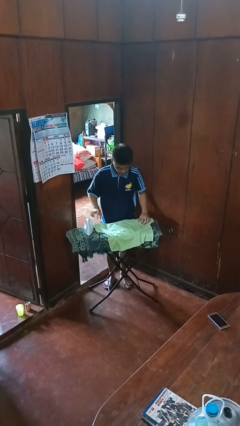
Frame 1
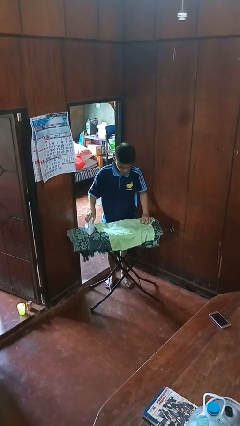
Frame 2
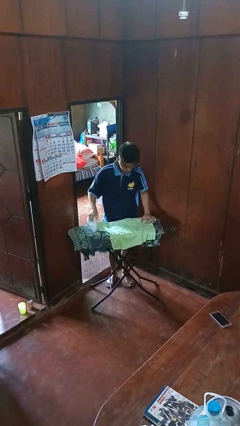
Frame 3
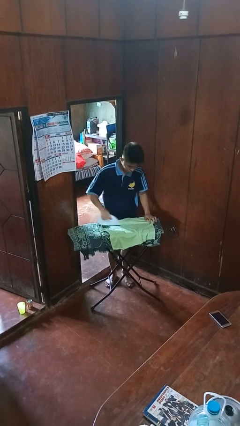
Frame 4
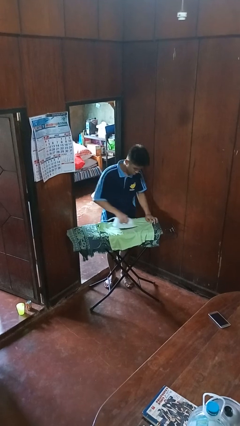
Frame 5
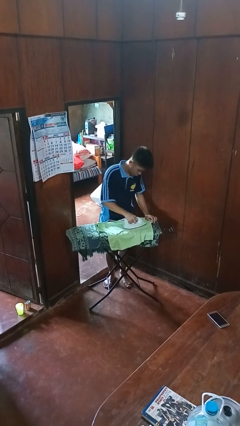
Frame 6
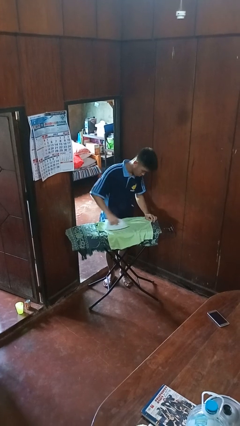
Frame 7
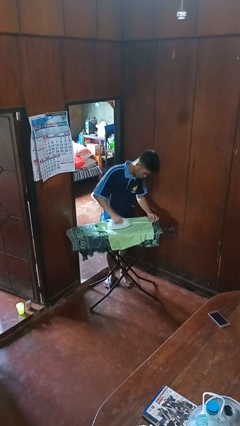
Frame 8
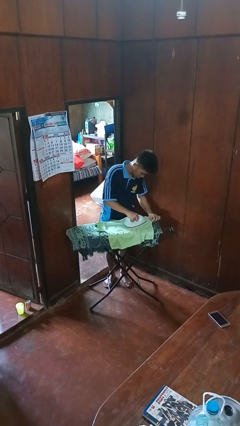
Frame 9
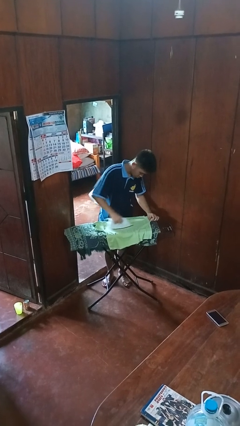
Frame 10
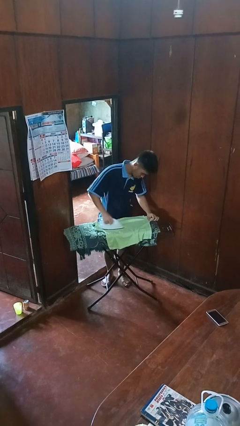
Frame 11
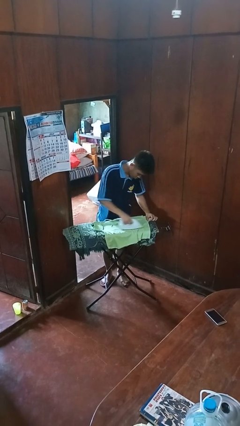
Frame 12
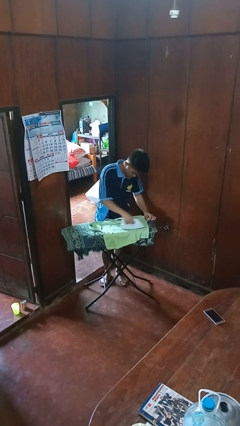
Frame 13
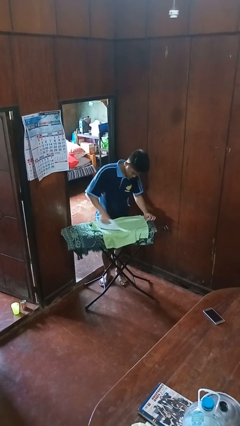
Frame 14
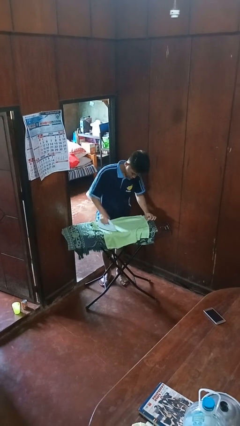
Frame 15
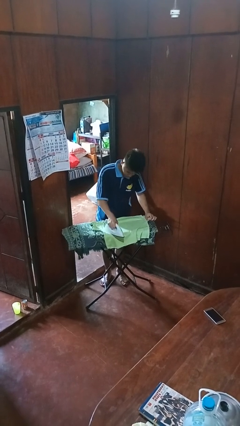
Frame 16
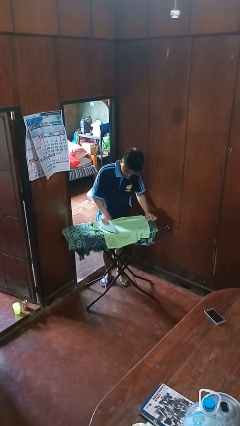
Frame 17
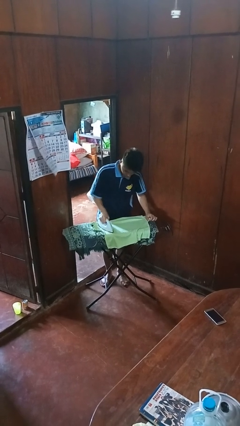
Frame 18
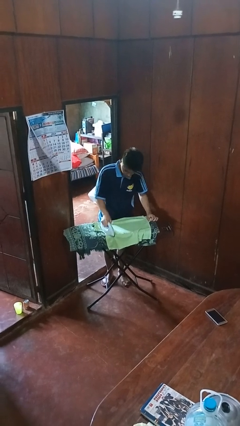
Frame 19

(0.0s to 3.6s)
person irons clothes

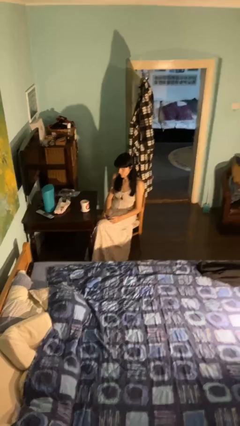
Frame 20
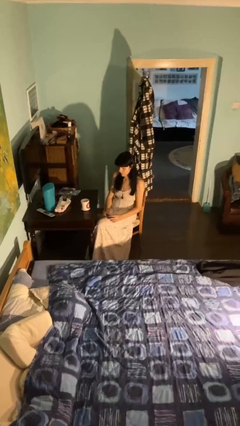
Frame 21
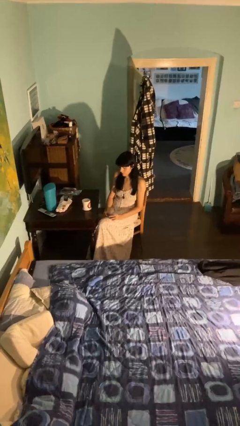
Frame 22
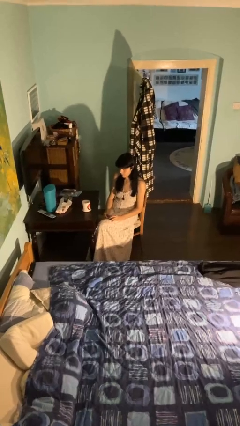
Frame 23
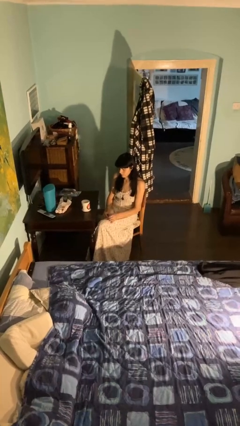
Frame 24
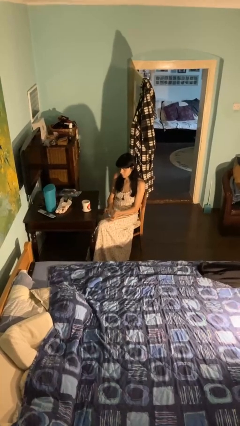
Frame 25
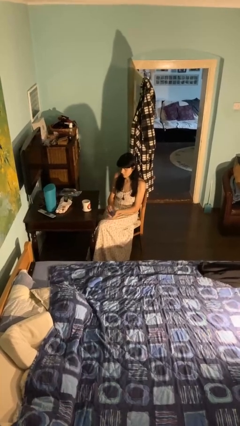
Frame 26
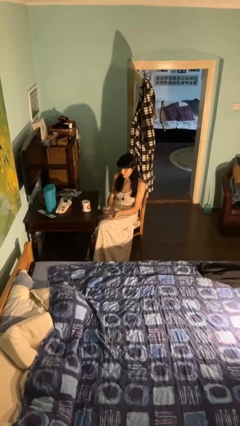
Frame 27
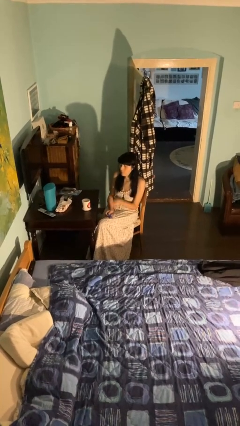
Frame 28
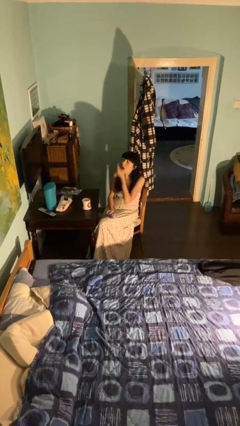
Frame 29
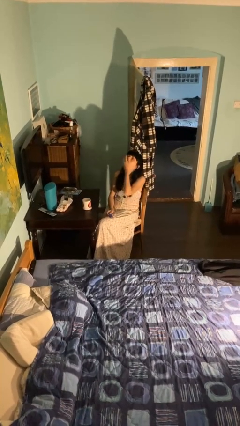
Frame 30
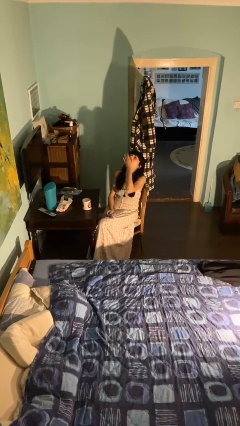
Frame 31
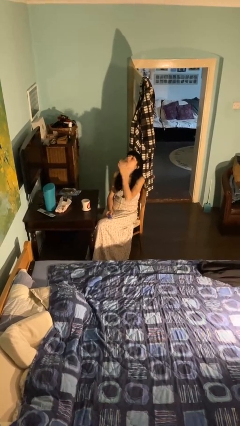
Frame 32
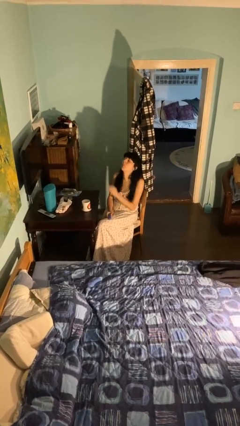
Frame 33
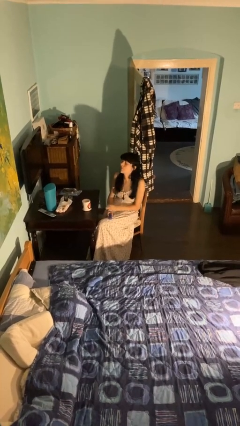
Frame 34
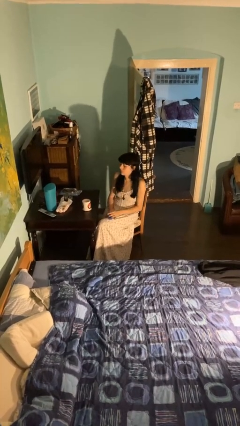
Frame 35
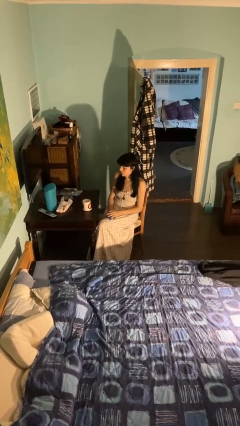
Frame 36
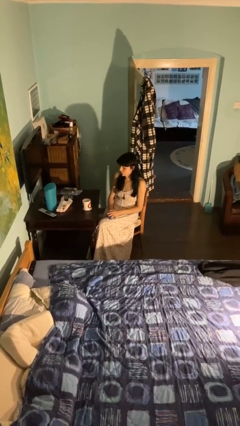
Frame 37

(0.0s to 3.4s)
person takes medicine pills

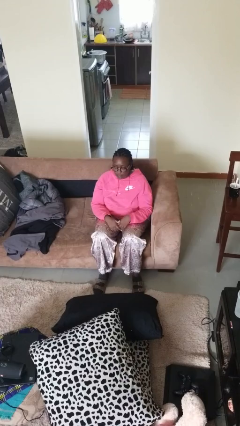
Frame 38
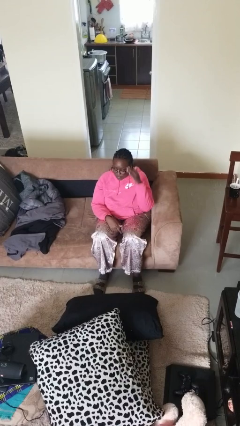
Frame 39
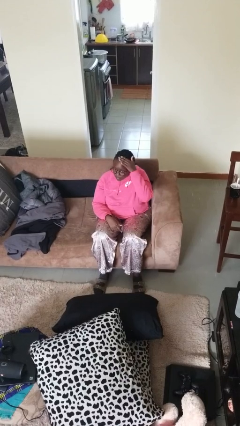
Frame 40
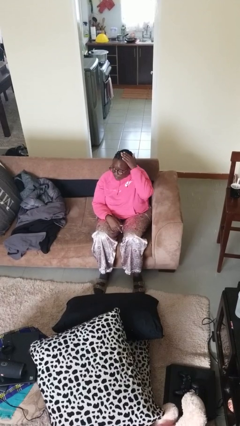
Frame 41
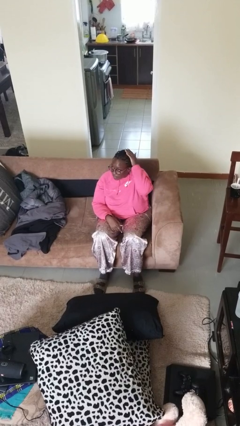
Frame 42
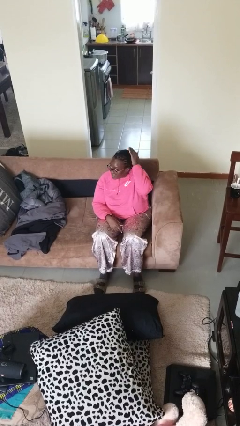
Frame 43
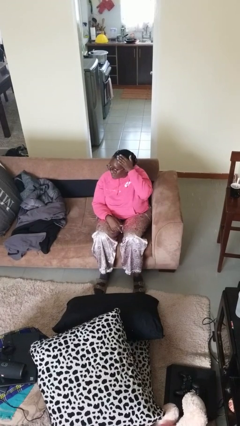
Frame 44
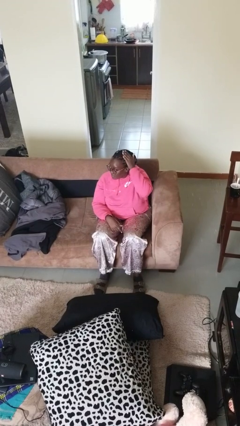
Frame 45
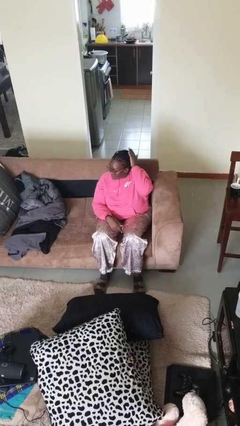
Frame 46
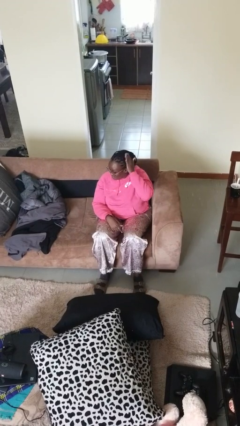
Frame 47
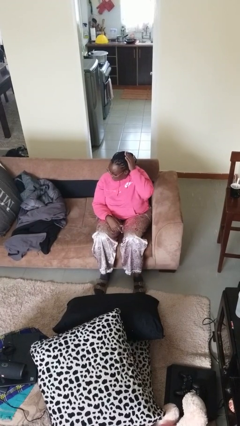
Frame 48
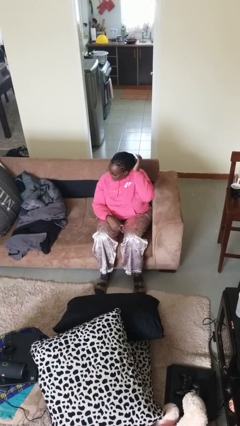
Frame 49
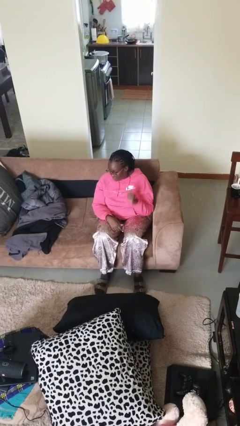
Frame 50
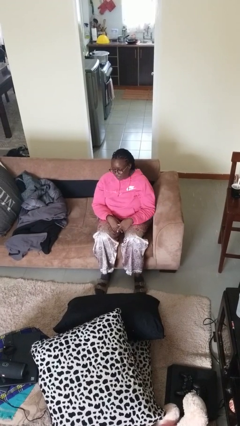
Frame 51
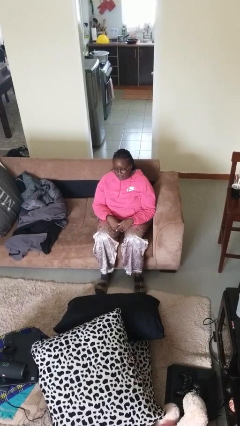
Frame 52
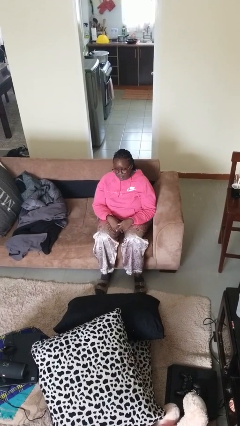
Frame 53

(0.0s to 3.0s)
person strokes hair

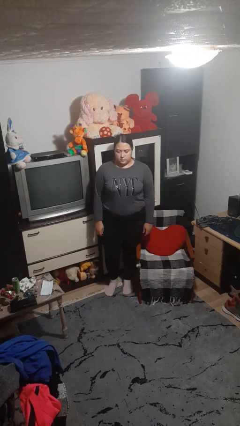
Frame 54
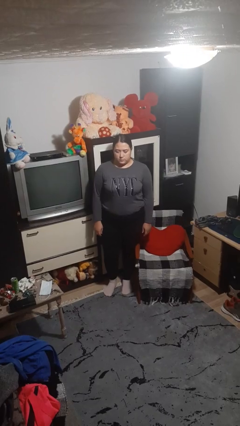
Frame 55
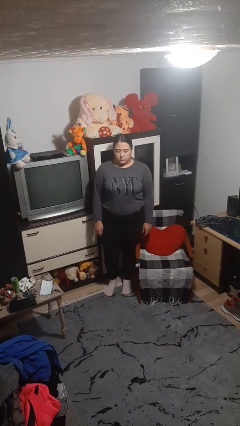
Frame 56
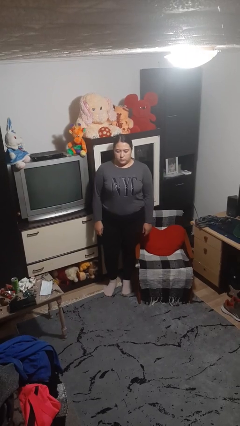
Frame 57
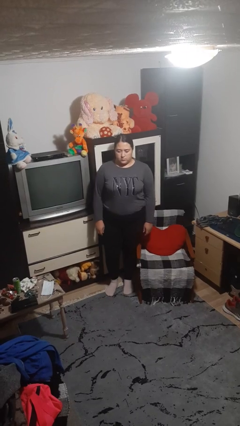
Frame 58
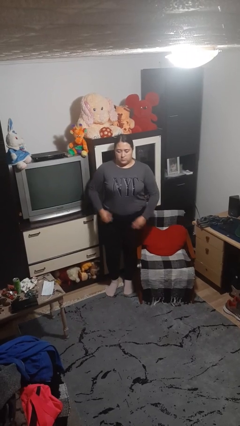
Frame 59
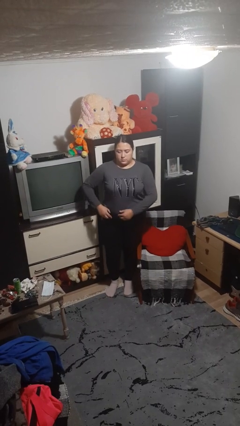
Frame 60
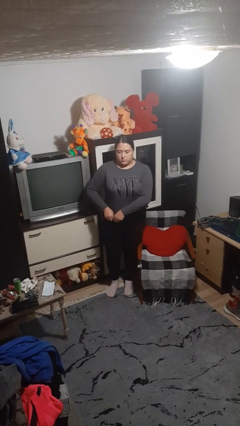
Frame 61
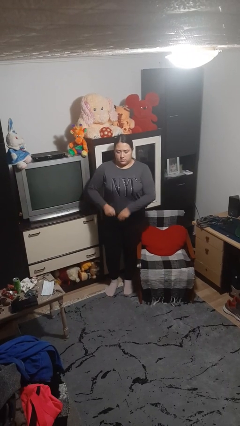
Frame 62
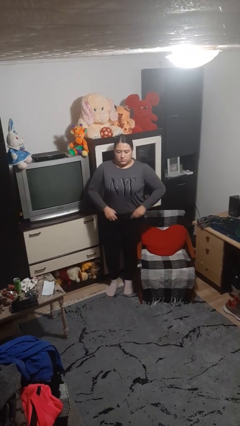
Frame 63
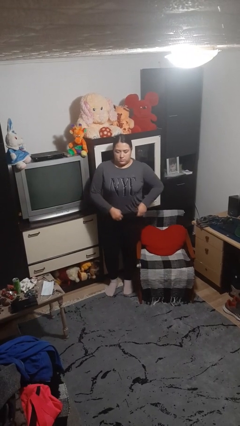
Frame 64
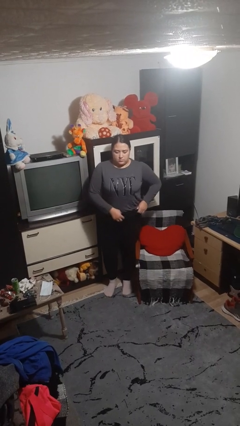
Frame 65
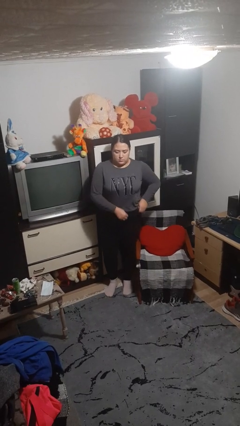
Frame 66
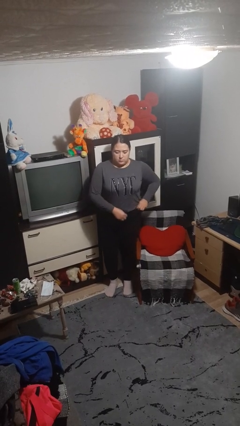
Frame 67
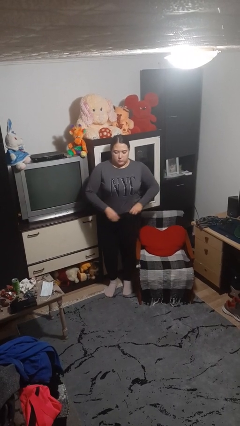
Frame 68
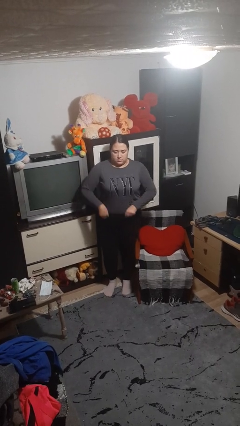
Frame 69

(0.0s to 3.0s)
person hikes up pants

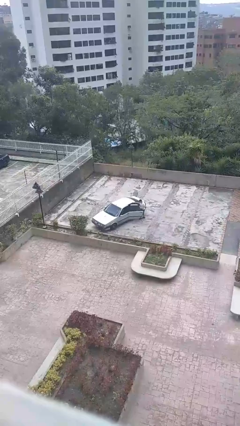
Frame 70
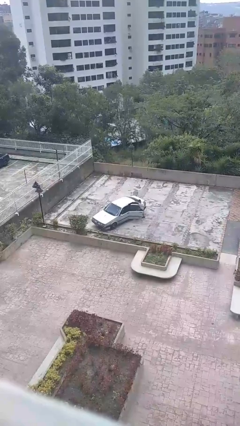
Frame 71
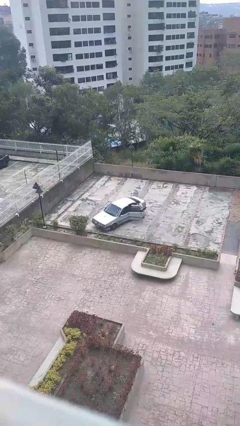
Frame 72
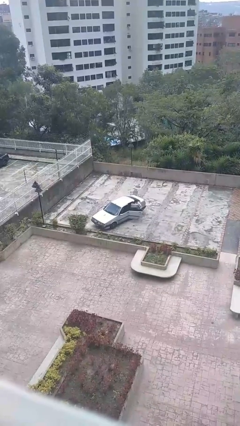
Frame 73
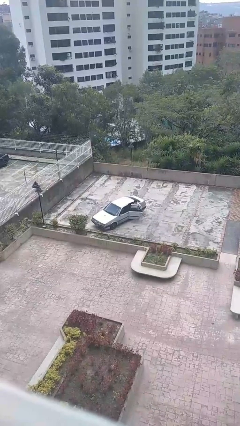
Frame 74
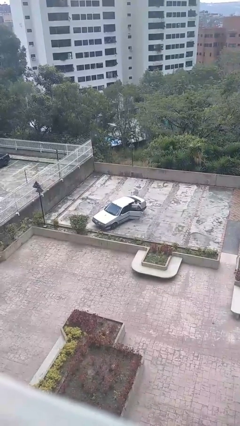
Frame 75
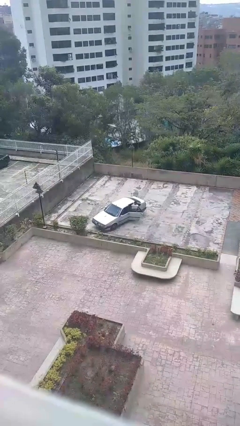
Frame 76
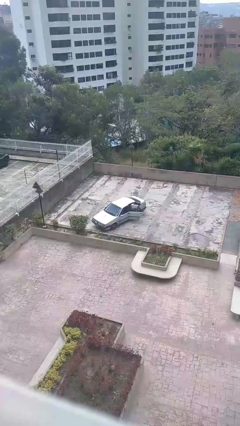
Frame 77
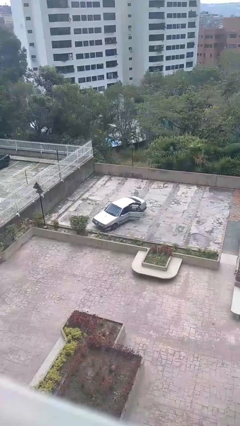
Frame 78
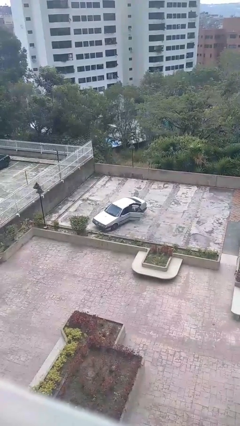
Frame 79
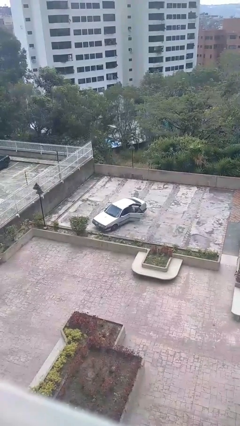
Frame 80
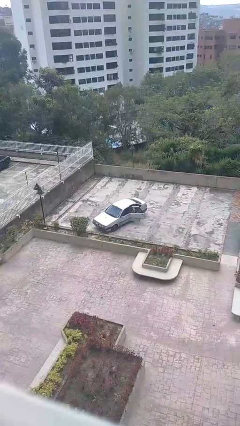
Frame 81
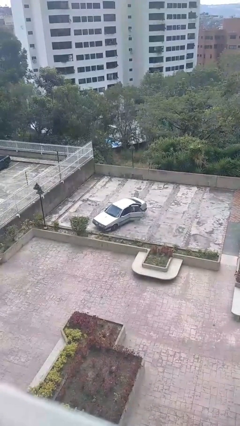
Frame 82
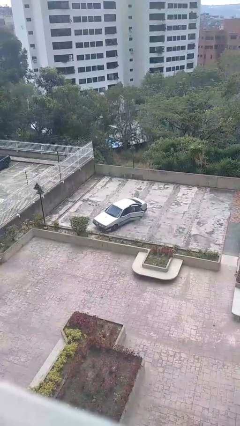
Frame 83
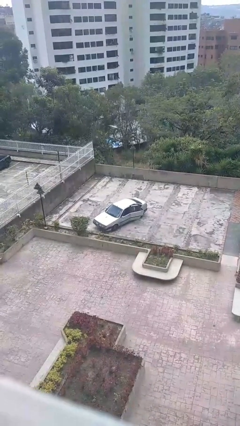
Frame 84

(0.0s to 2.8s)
car picks up person

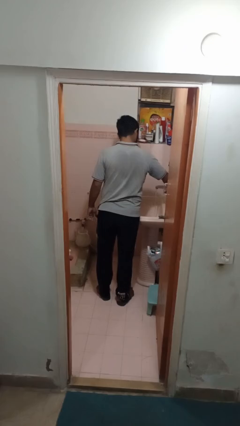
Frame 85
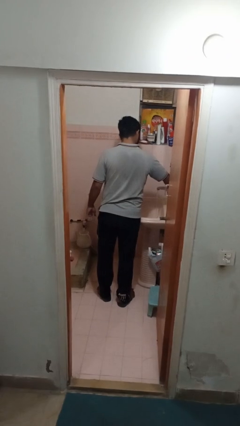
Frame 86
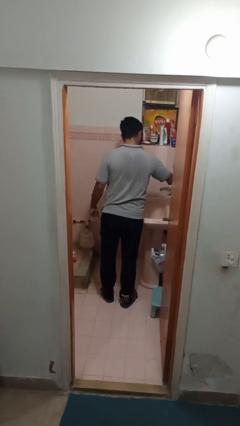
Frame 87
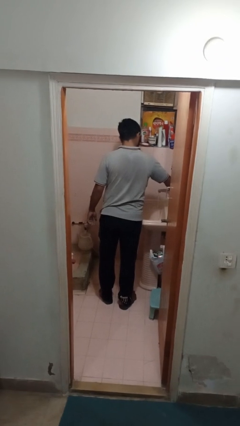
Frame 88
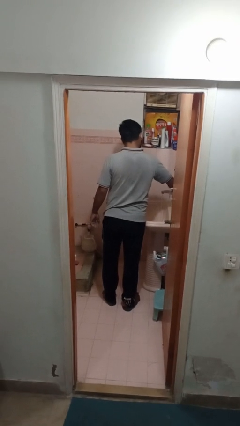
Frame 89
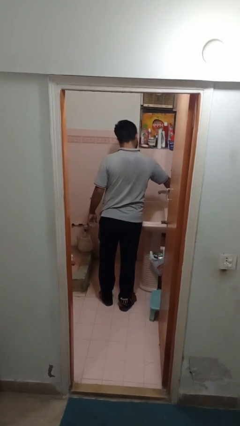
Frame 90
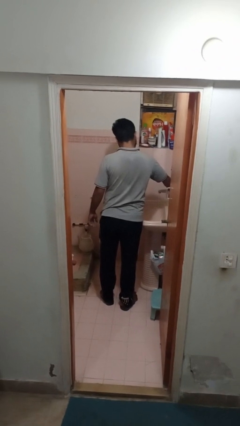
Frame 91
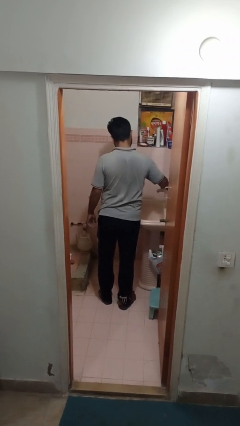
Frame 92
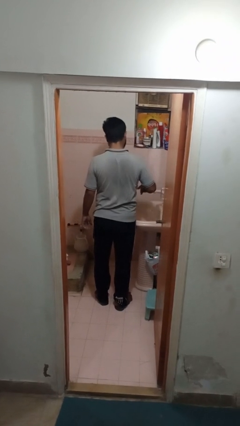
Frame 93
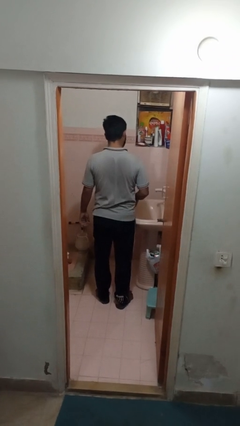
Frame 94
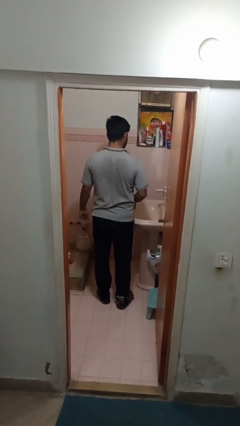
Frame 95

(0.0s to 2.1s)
person turns off faucet
